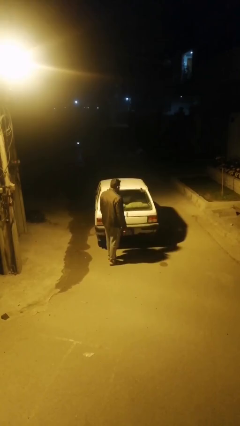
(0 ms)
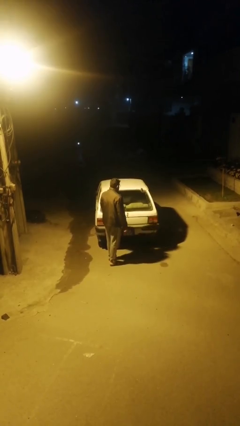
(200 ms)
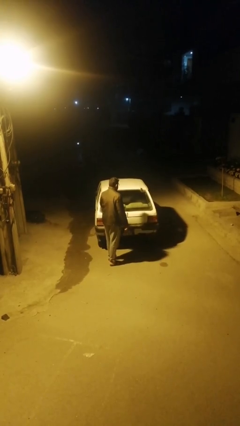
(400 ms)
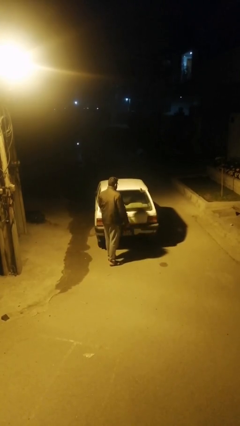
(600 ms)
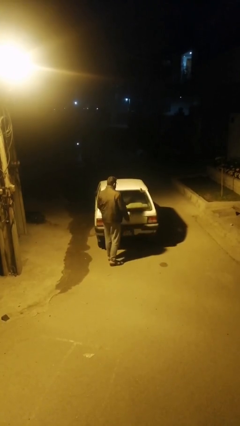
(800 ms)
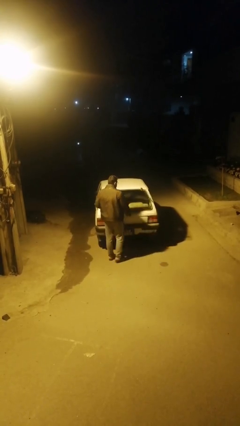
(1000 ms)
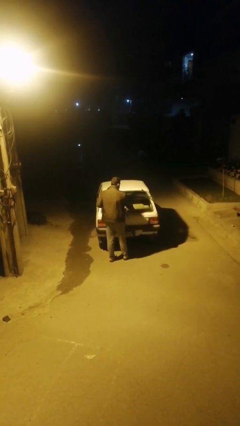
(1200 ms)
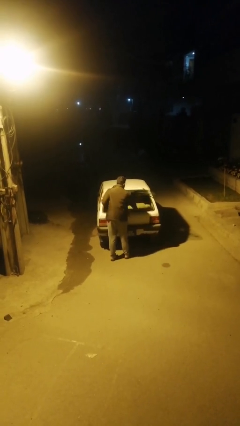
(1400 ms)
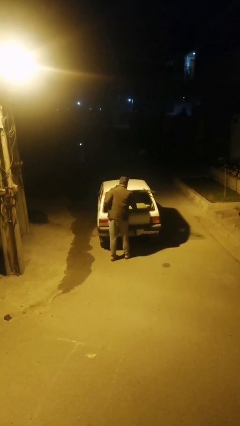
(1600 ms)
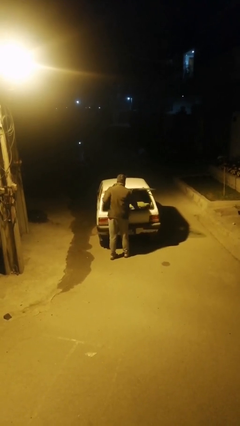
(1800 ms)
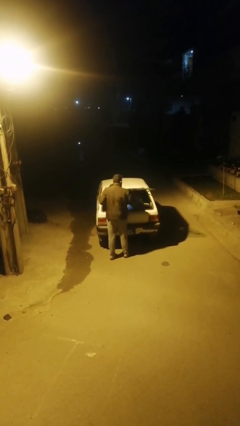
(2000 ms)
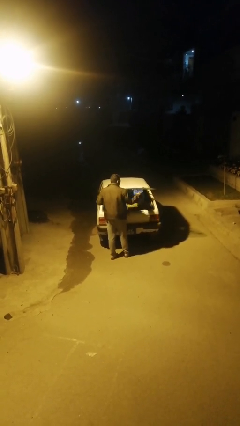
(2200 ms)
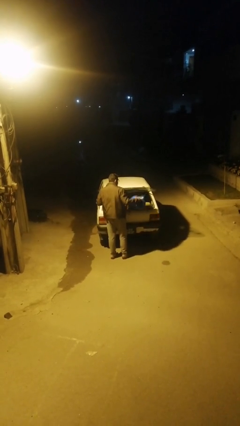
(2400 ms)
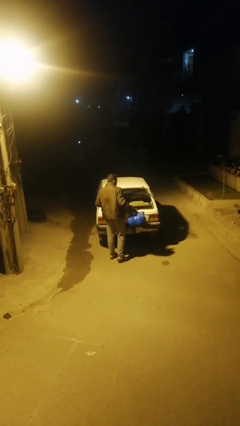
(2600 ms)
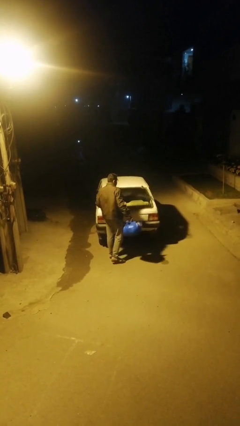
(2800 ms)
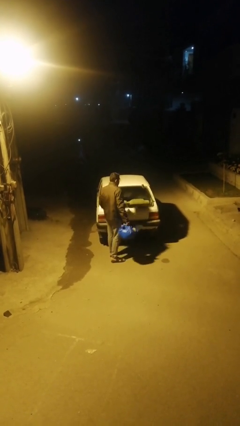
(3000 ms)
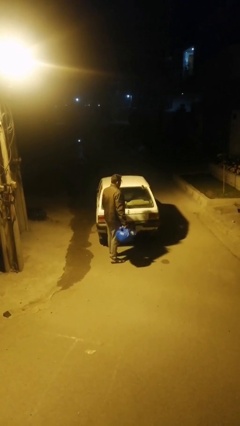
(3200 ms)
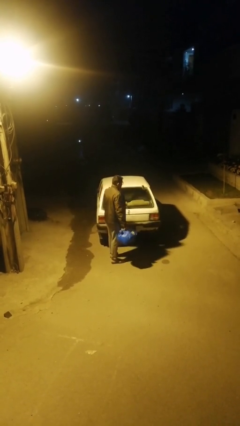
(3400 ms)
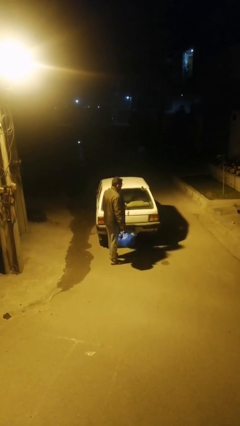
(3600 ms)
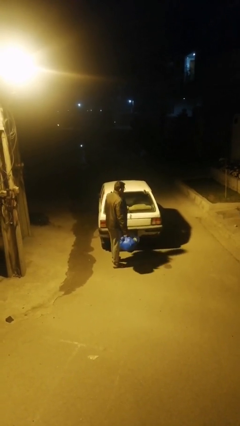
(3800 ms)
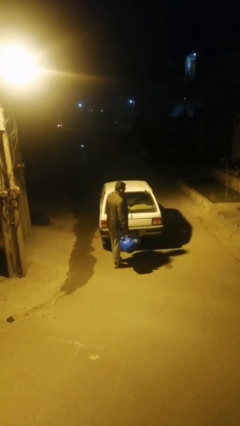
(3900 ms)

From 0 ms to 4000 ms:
person unloads car

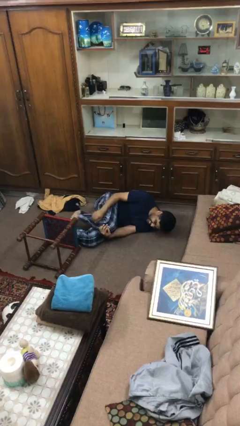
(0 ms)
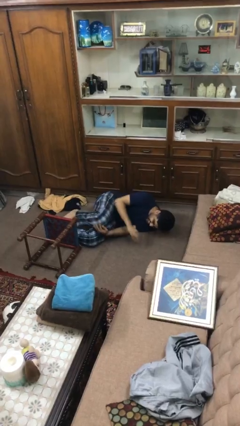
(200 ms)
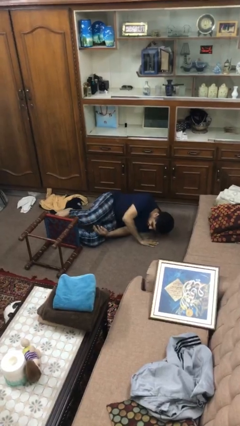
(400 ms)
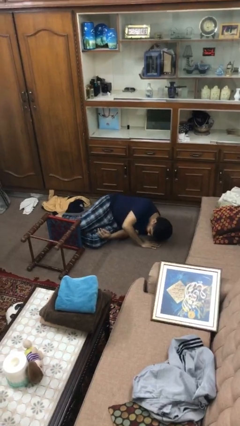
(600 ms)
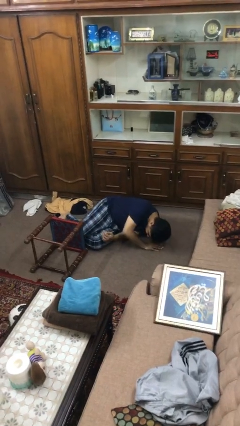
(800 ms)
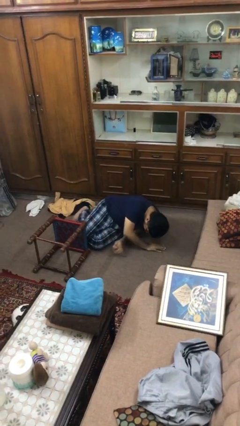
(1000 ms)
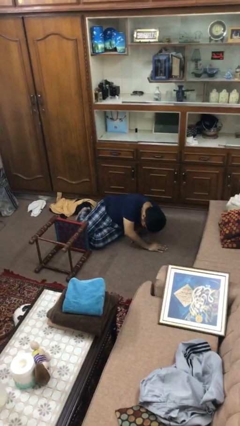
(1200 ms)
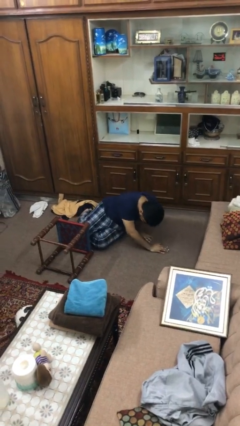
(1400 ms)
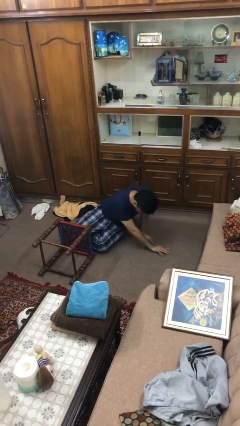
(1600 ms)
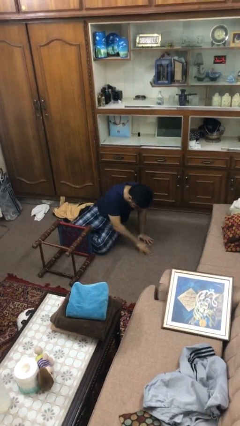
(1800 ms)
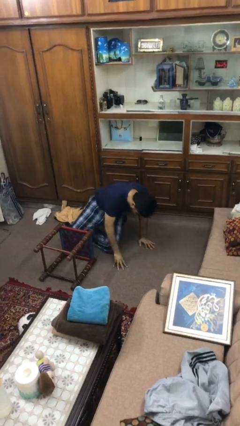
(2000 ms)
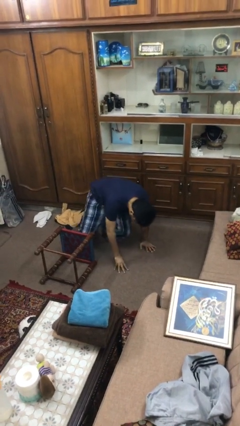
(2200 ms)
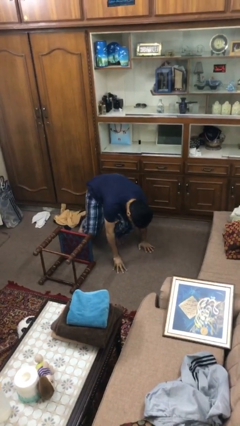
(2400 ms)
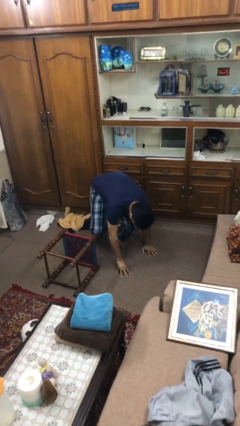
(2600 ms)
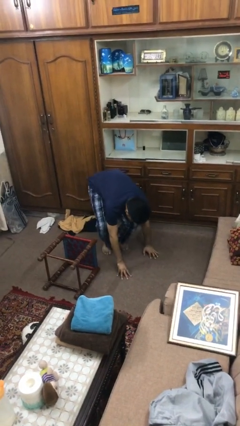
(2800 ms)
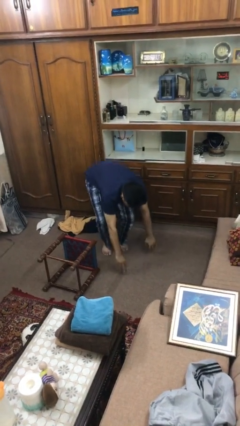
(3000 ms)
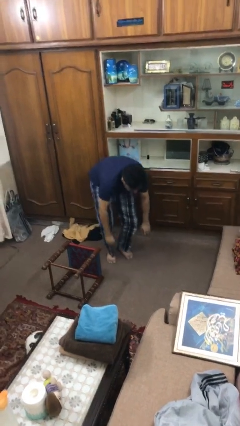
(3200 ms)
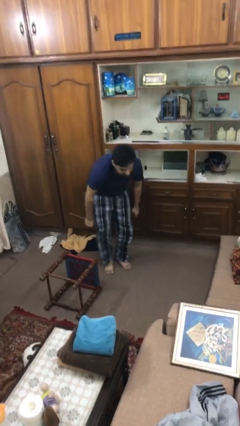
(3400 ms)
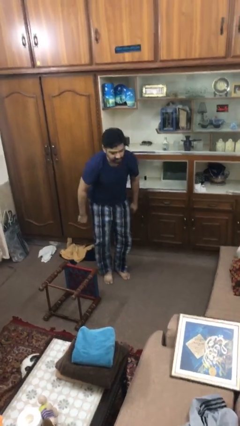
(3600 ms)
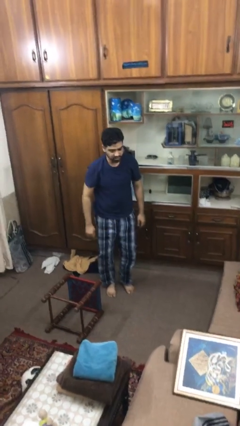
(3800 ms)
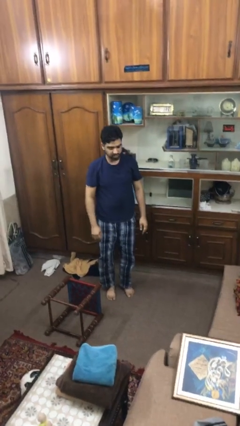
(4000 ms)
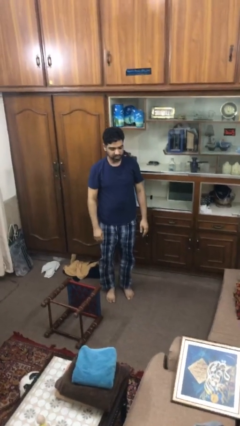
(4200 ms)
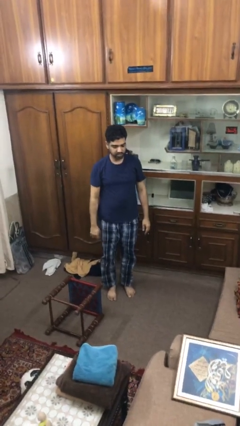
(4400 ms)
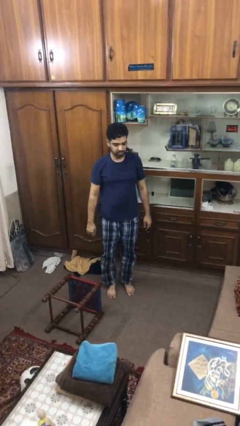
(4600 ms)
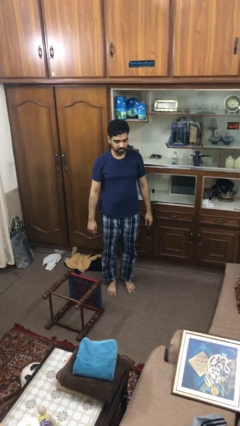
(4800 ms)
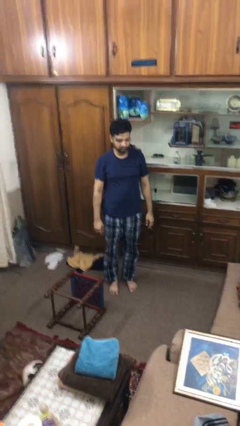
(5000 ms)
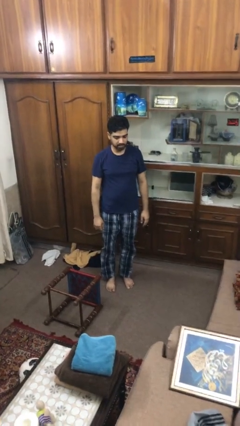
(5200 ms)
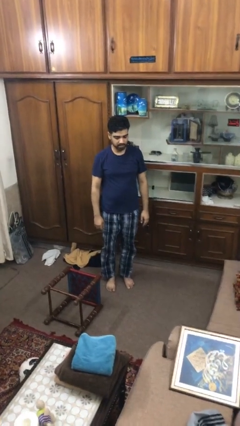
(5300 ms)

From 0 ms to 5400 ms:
person stands up from floor

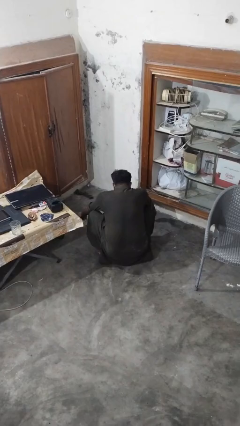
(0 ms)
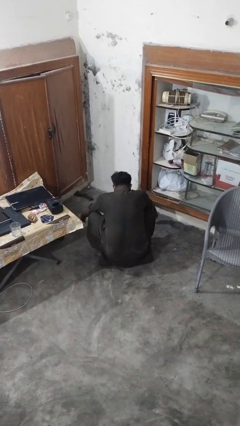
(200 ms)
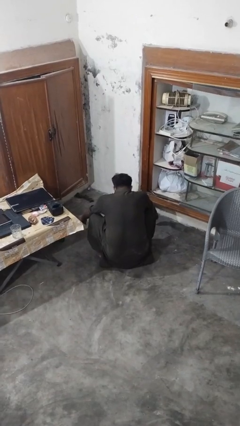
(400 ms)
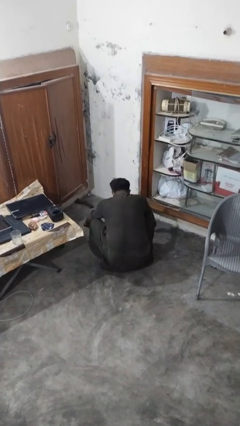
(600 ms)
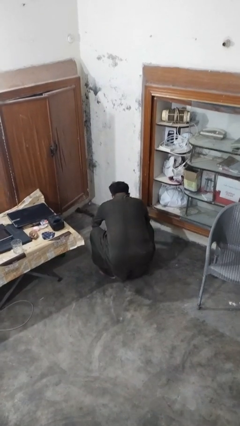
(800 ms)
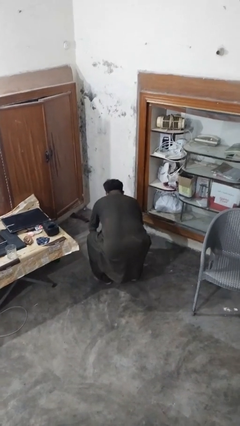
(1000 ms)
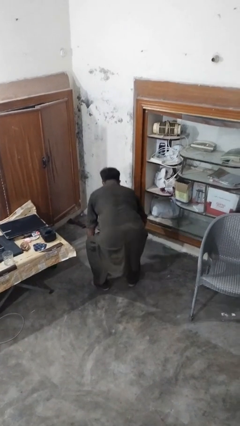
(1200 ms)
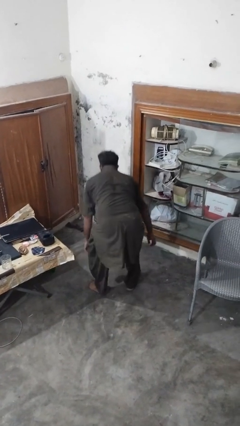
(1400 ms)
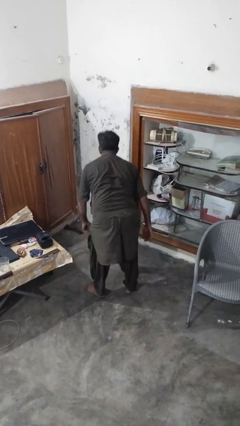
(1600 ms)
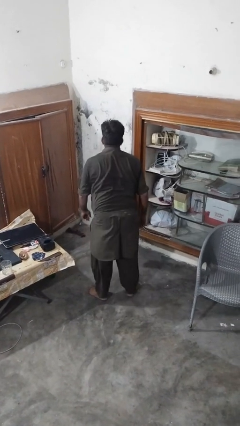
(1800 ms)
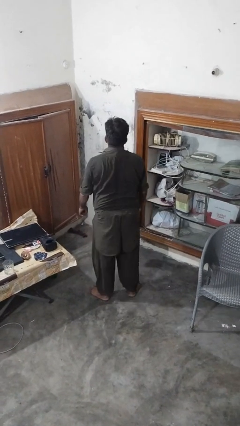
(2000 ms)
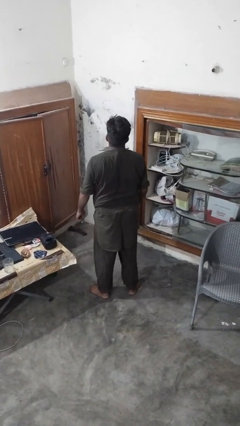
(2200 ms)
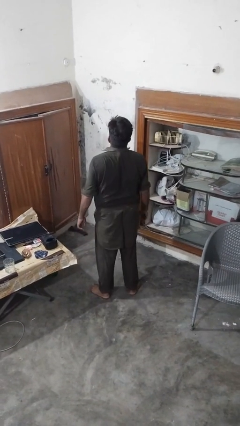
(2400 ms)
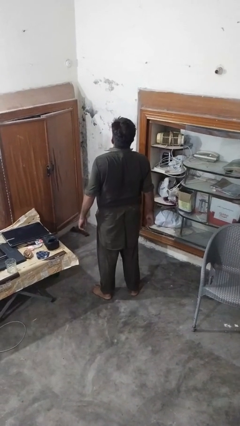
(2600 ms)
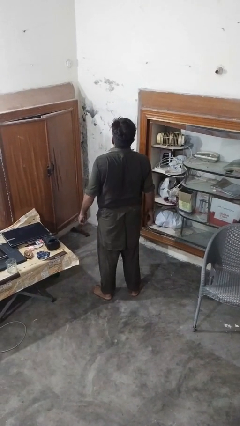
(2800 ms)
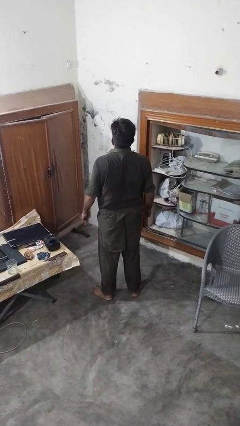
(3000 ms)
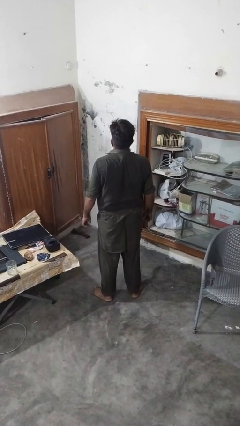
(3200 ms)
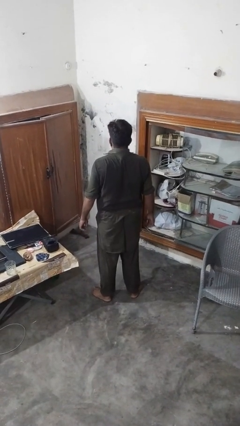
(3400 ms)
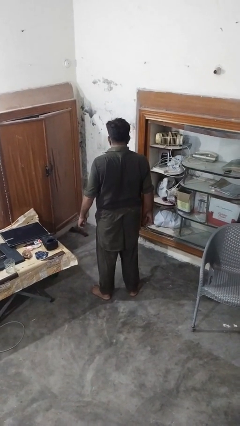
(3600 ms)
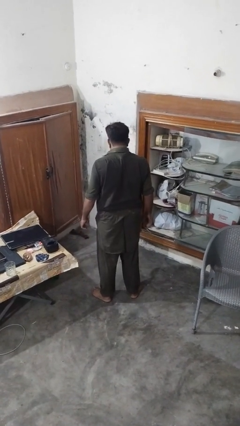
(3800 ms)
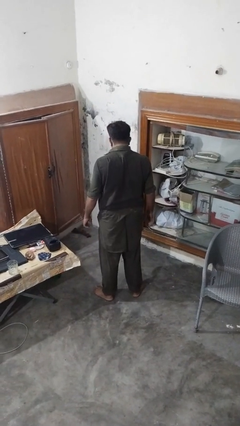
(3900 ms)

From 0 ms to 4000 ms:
person stands up

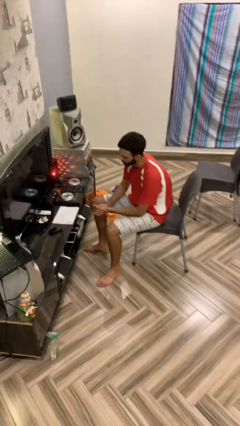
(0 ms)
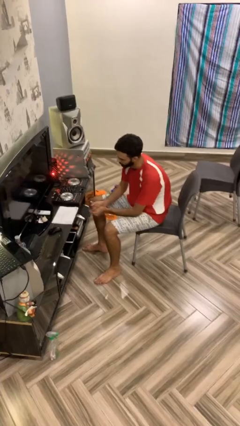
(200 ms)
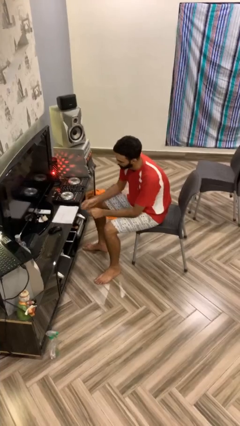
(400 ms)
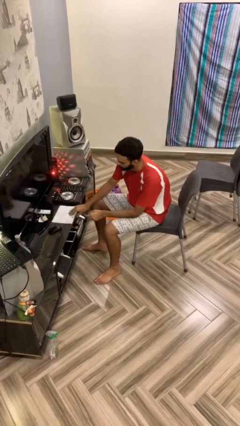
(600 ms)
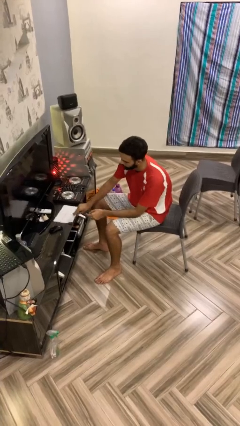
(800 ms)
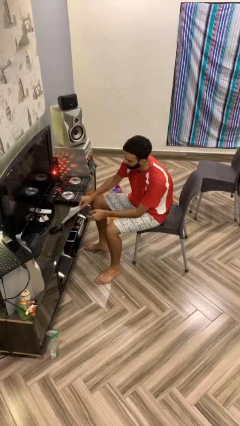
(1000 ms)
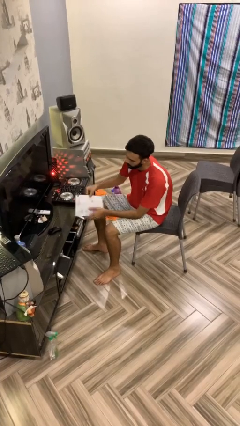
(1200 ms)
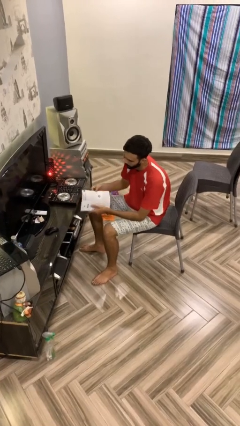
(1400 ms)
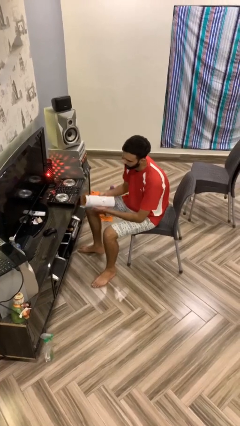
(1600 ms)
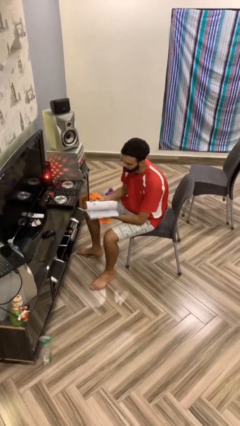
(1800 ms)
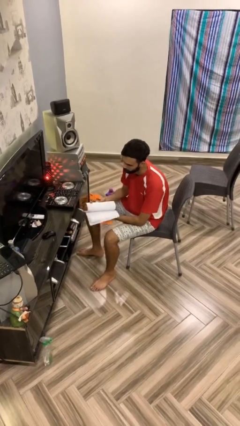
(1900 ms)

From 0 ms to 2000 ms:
person picks up object from table

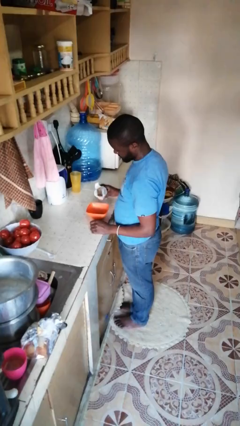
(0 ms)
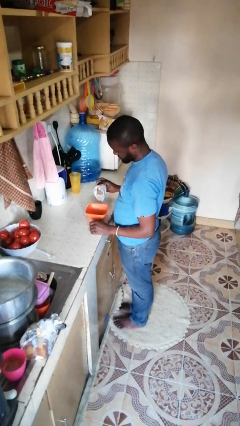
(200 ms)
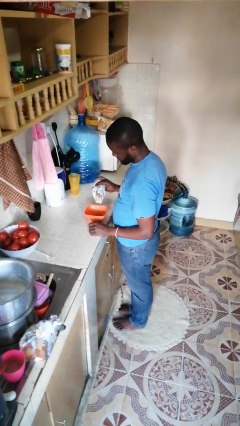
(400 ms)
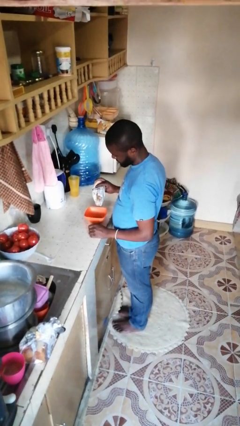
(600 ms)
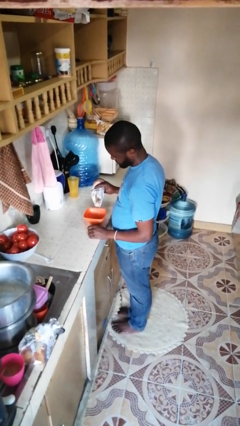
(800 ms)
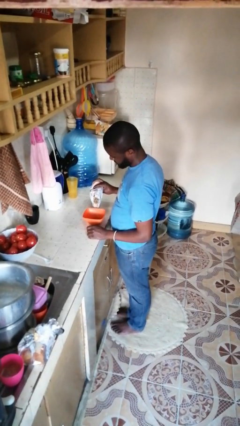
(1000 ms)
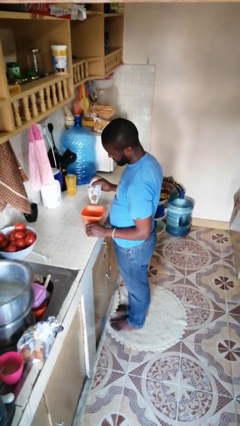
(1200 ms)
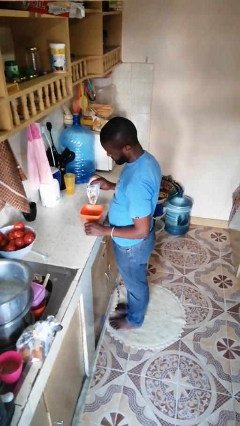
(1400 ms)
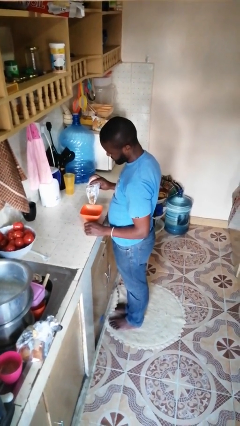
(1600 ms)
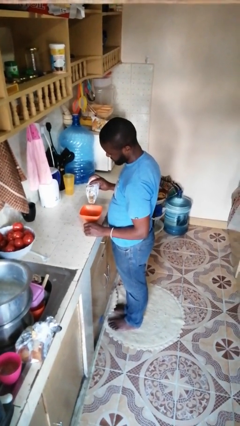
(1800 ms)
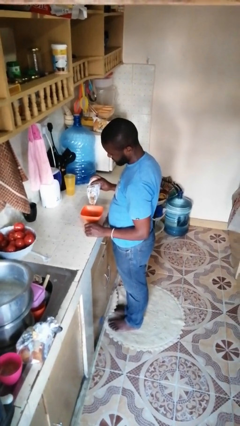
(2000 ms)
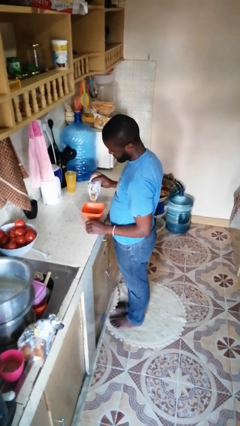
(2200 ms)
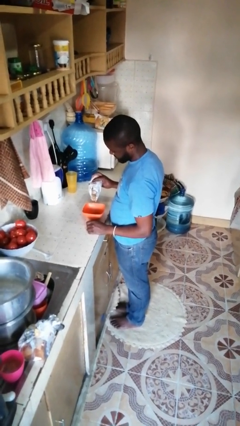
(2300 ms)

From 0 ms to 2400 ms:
person pours into bowl
